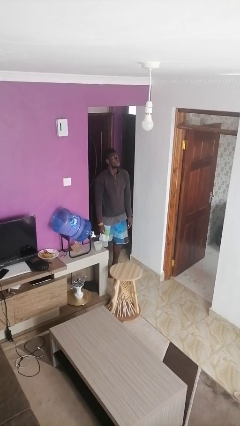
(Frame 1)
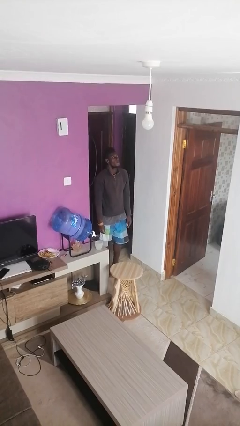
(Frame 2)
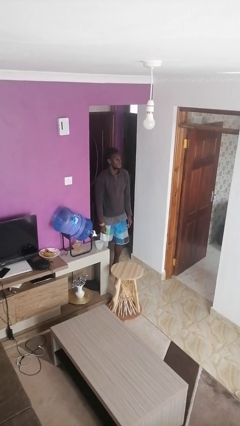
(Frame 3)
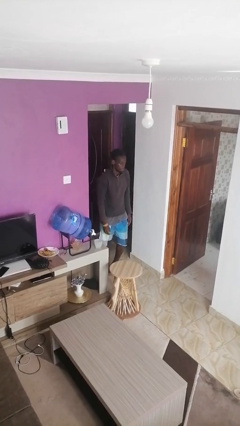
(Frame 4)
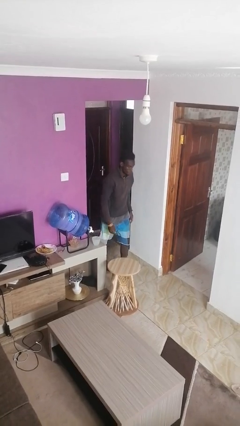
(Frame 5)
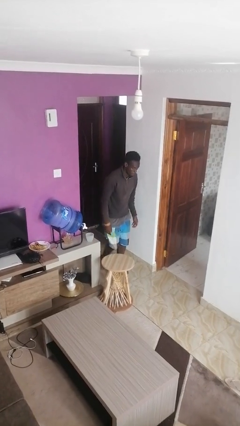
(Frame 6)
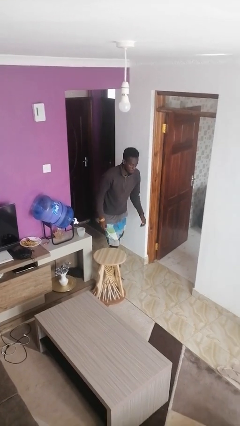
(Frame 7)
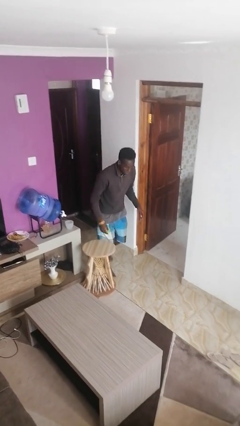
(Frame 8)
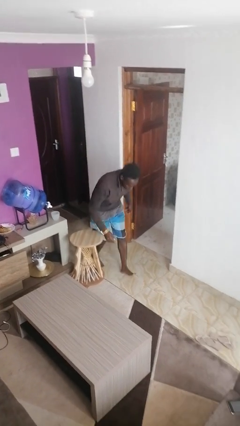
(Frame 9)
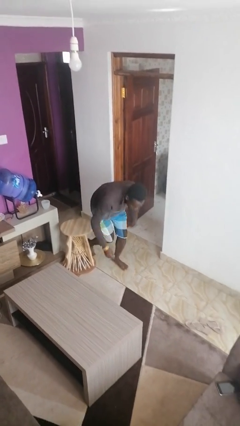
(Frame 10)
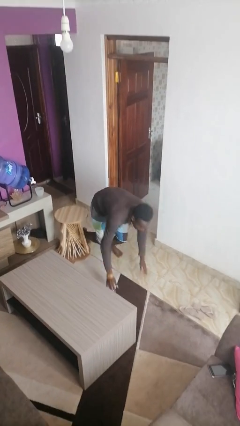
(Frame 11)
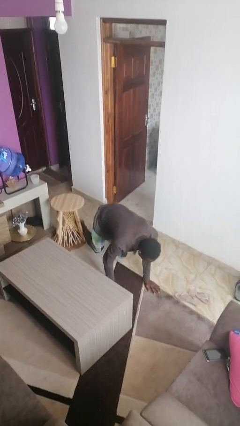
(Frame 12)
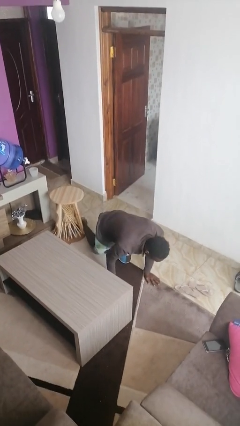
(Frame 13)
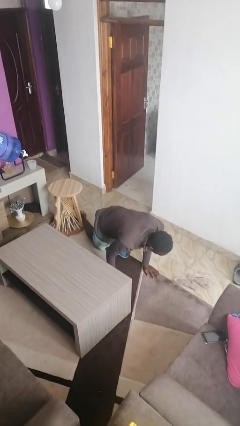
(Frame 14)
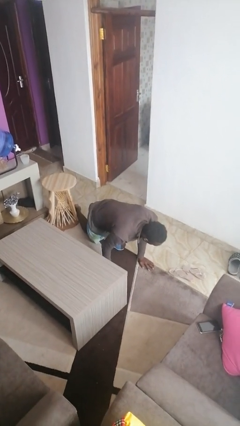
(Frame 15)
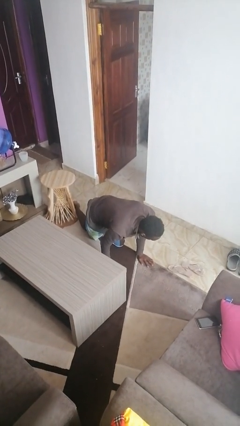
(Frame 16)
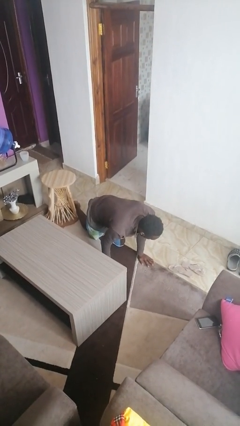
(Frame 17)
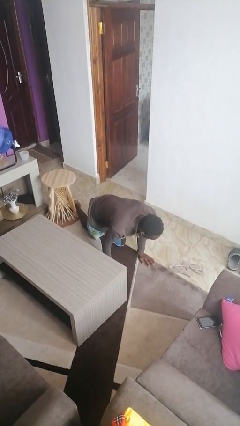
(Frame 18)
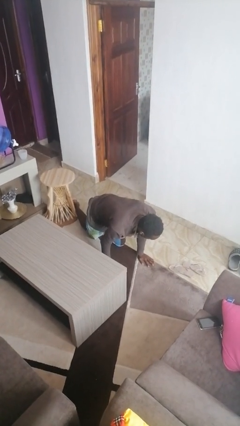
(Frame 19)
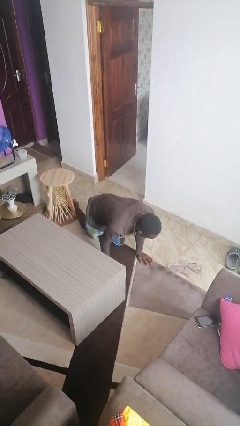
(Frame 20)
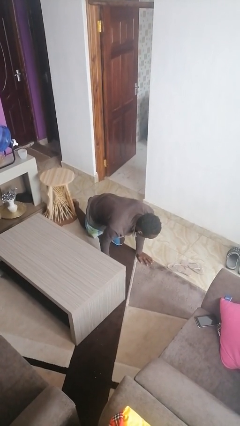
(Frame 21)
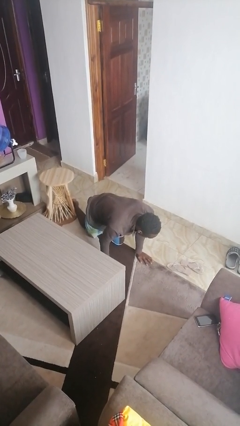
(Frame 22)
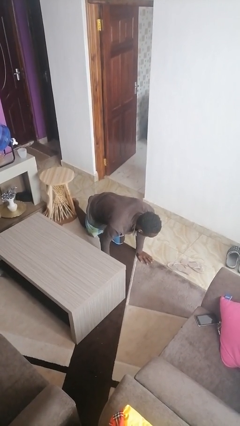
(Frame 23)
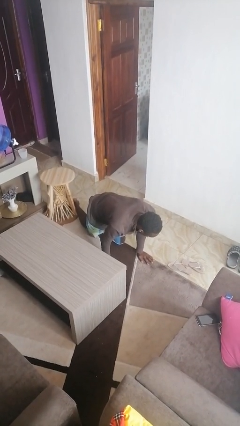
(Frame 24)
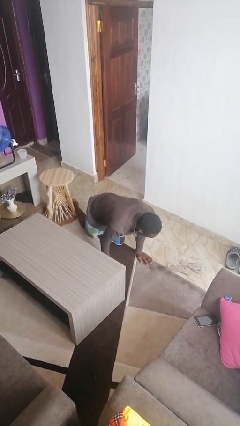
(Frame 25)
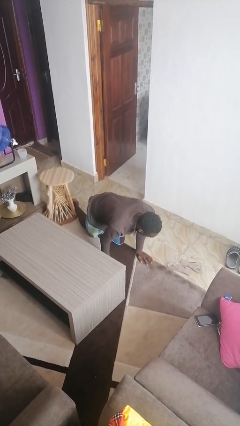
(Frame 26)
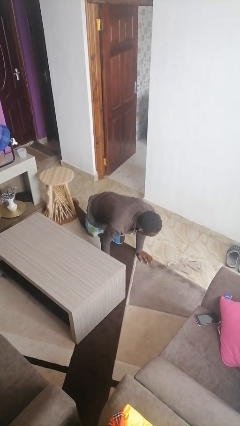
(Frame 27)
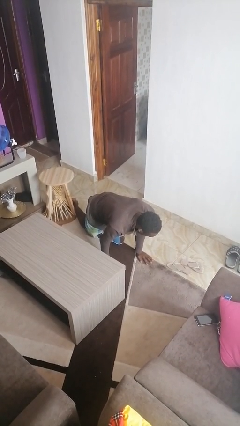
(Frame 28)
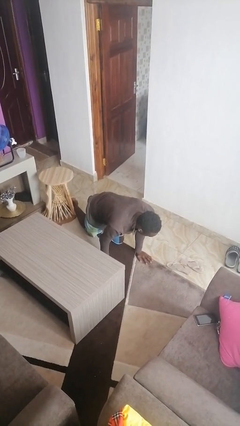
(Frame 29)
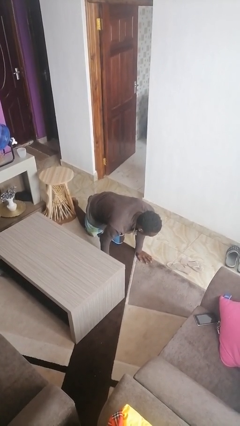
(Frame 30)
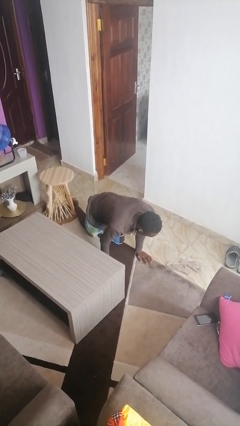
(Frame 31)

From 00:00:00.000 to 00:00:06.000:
person trips on object on floor

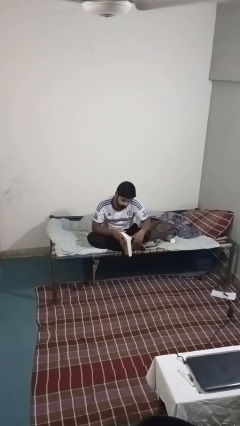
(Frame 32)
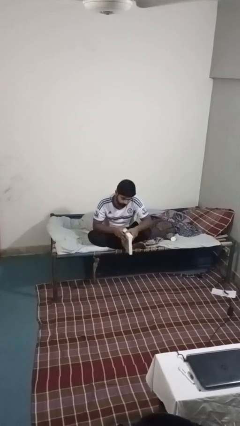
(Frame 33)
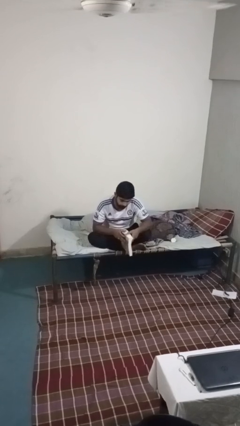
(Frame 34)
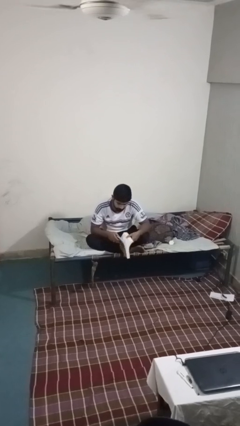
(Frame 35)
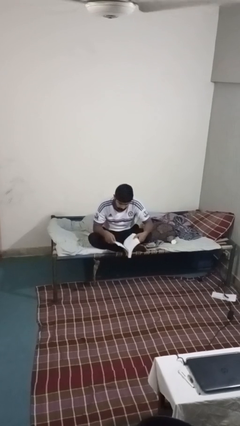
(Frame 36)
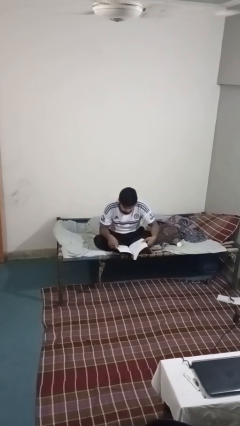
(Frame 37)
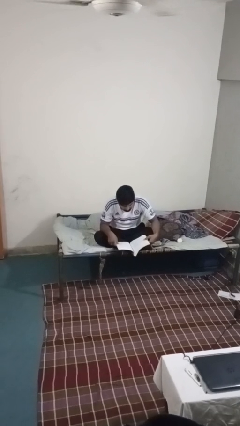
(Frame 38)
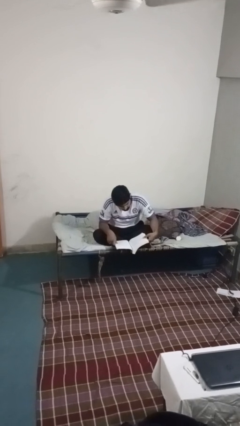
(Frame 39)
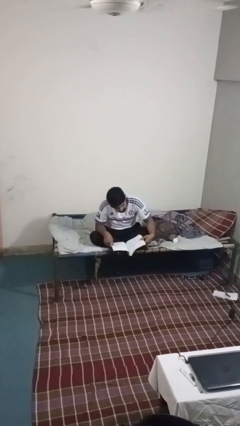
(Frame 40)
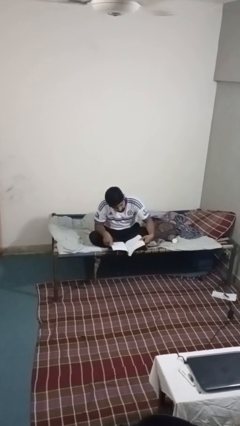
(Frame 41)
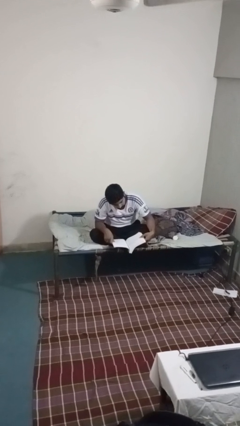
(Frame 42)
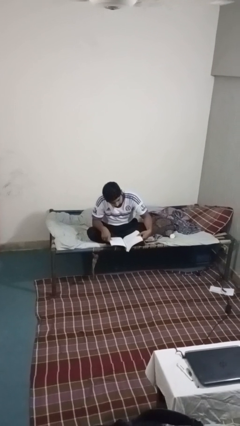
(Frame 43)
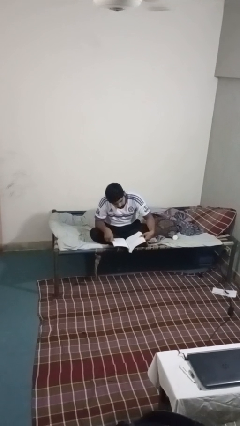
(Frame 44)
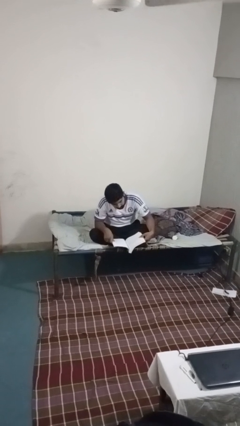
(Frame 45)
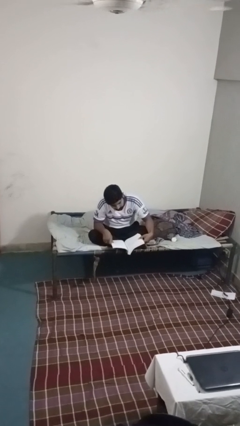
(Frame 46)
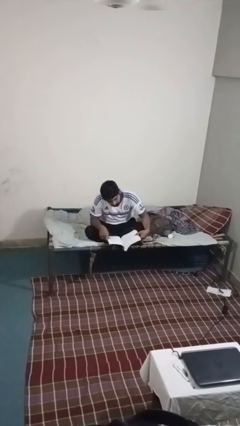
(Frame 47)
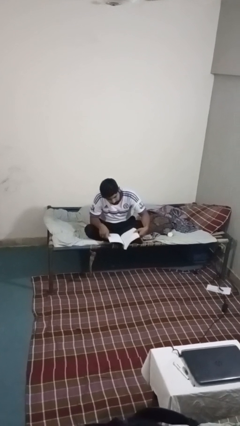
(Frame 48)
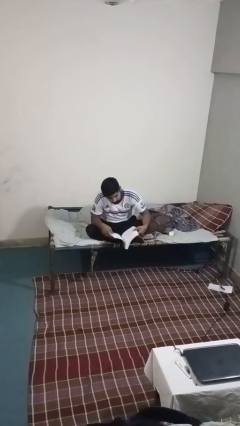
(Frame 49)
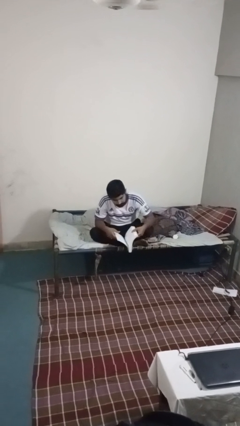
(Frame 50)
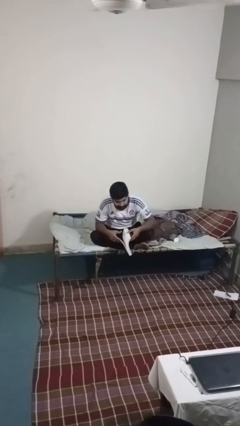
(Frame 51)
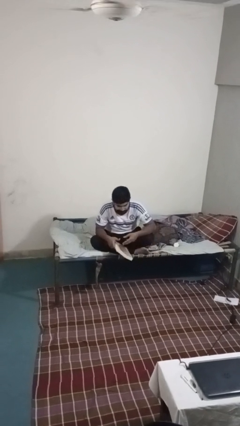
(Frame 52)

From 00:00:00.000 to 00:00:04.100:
person reads book

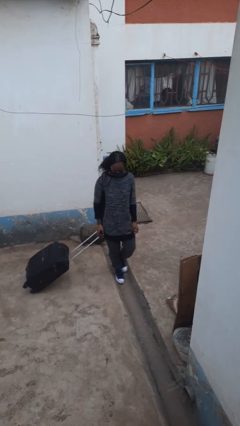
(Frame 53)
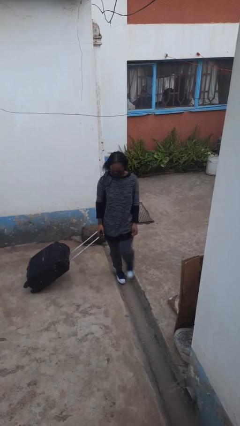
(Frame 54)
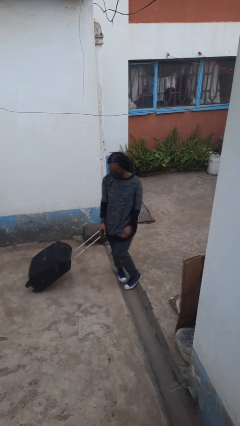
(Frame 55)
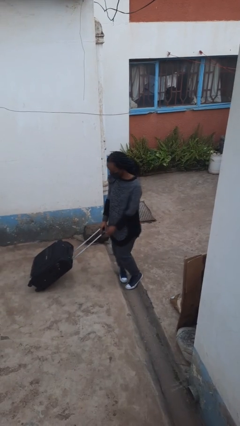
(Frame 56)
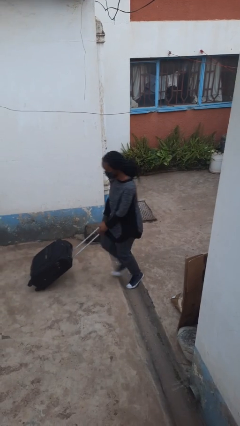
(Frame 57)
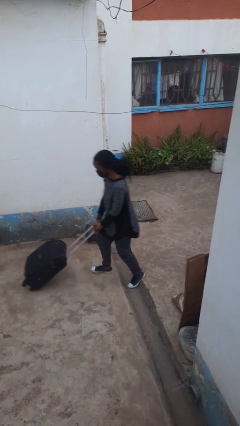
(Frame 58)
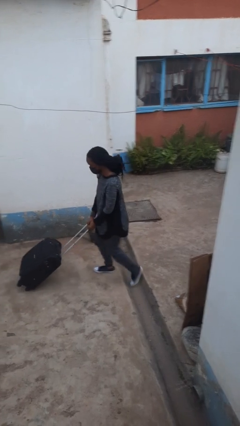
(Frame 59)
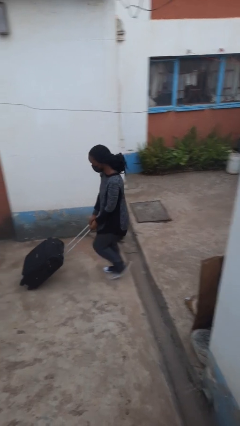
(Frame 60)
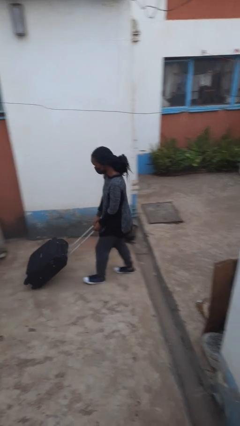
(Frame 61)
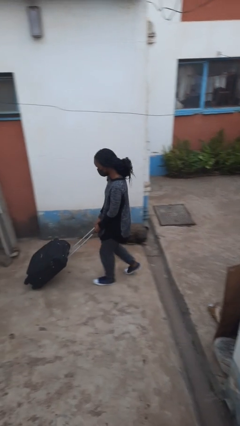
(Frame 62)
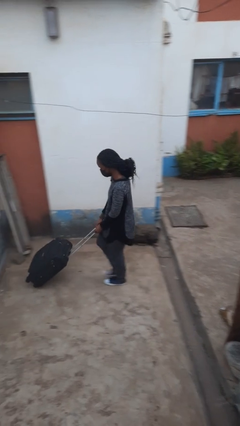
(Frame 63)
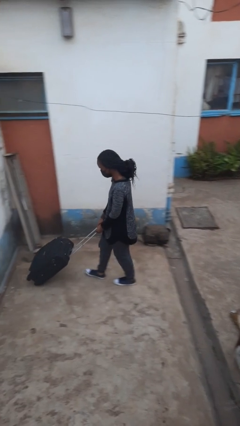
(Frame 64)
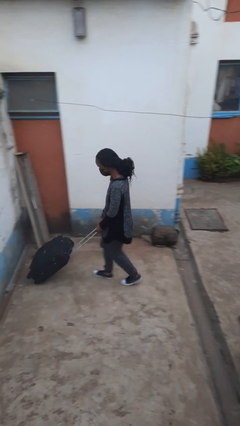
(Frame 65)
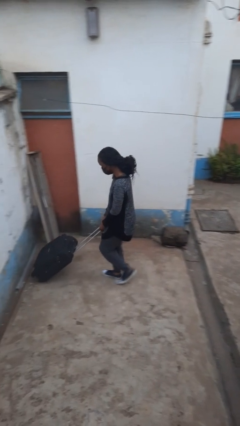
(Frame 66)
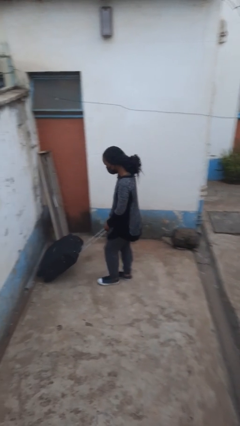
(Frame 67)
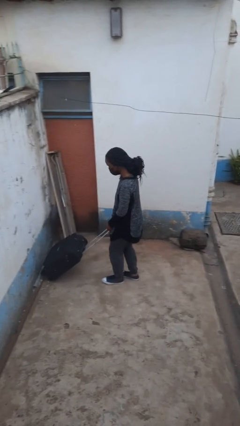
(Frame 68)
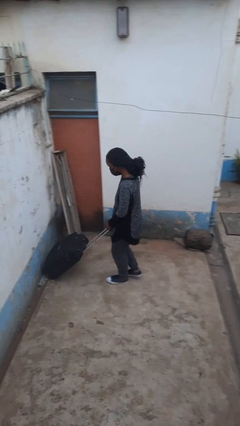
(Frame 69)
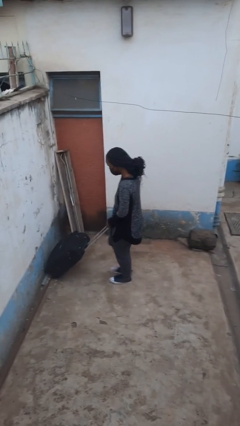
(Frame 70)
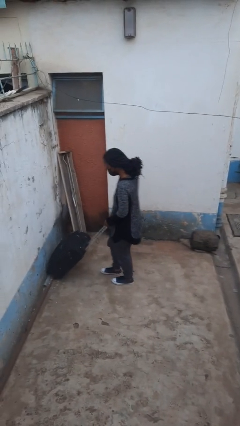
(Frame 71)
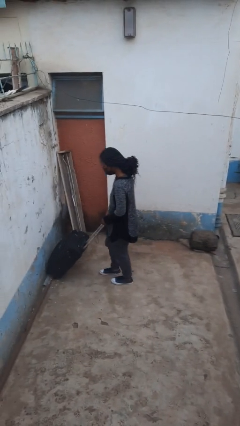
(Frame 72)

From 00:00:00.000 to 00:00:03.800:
person pushes wheeled cart

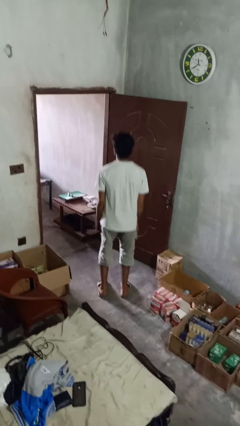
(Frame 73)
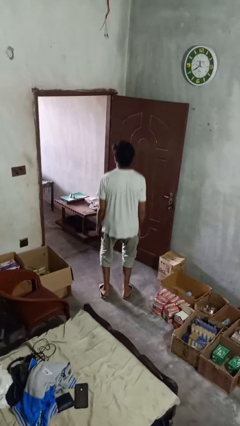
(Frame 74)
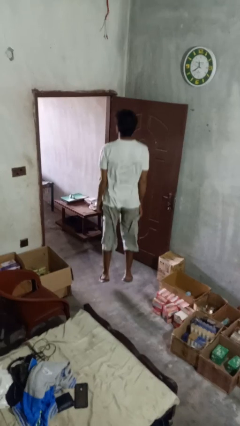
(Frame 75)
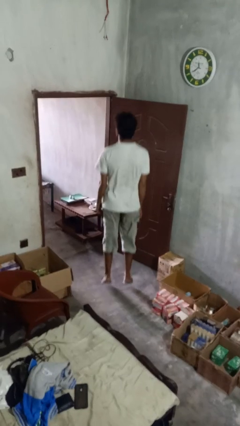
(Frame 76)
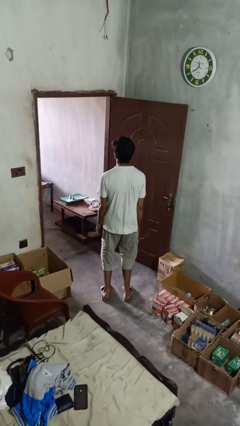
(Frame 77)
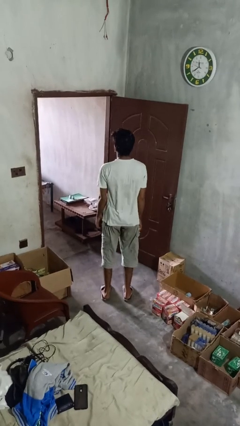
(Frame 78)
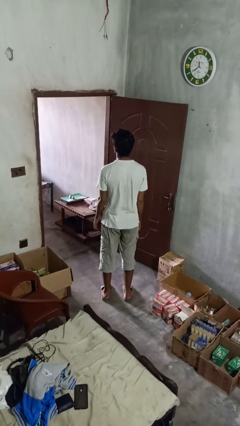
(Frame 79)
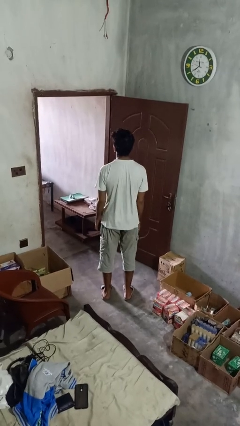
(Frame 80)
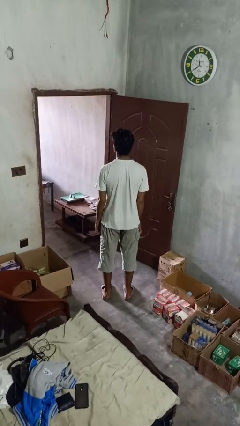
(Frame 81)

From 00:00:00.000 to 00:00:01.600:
person jumps

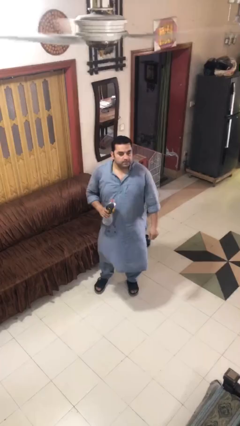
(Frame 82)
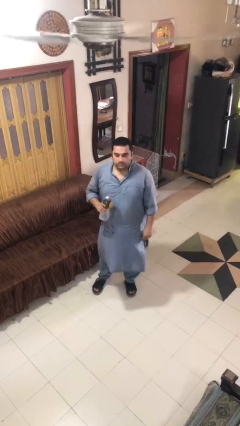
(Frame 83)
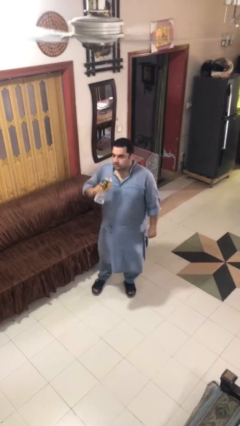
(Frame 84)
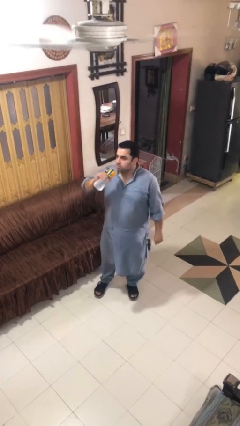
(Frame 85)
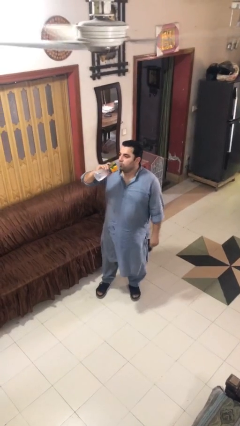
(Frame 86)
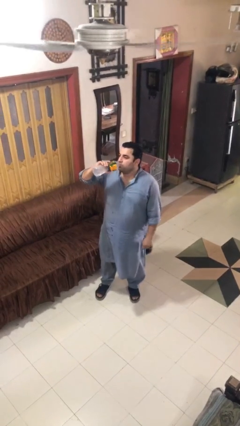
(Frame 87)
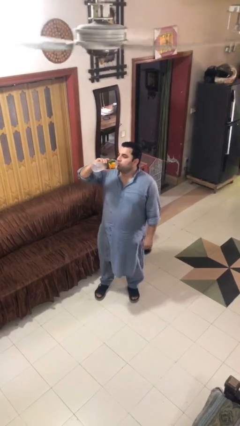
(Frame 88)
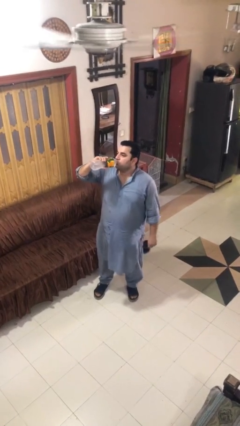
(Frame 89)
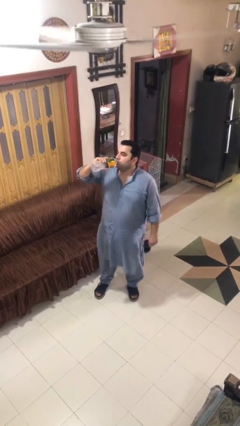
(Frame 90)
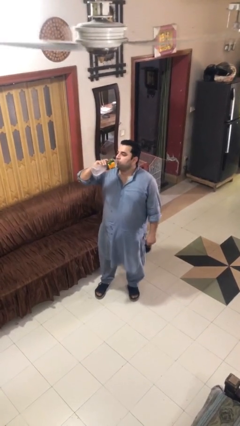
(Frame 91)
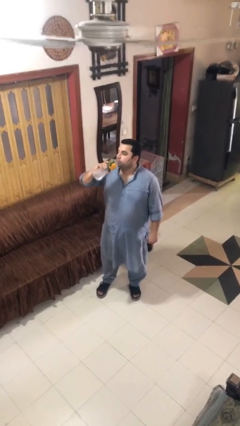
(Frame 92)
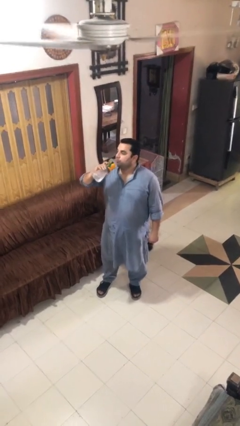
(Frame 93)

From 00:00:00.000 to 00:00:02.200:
person drinks from bottle
